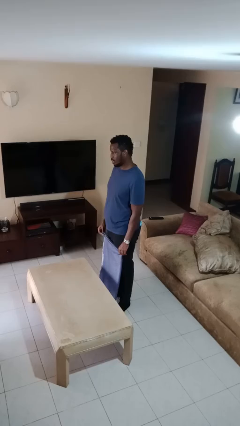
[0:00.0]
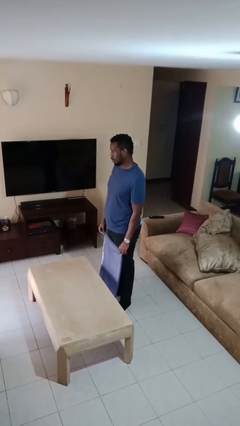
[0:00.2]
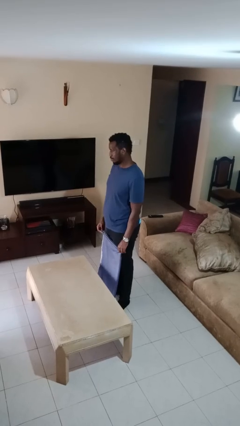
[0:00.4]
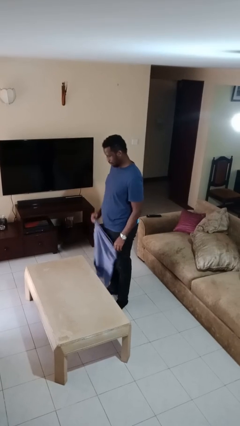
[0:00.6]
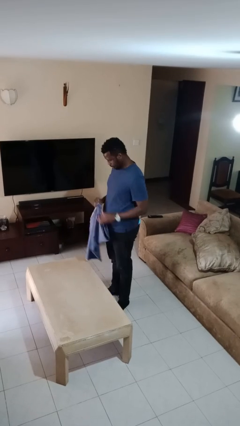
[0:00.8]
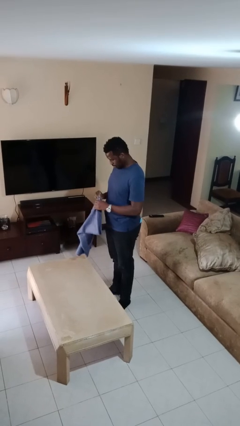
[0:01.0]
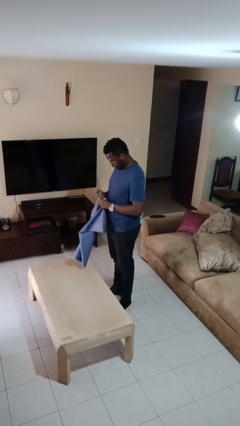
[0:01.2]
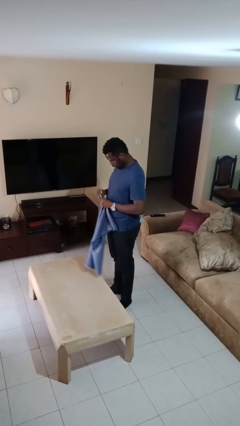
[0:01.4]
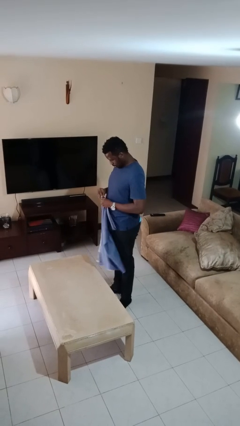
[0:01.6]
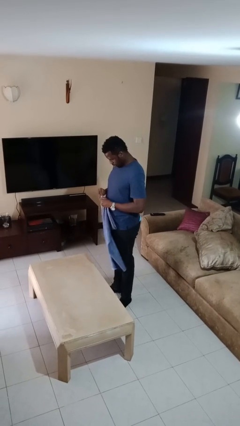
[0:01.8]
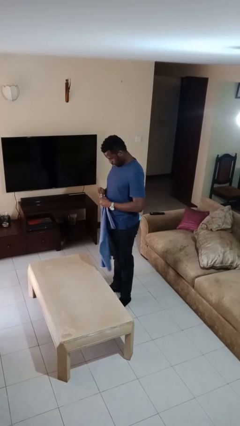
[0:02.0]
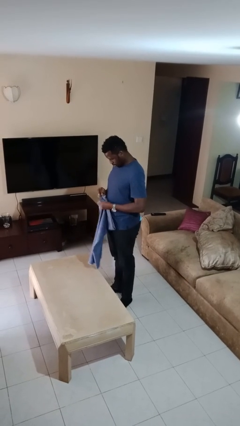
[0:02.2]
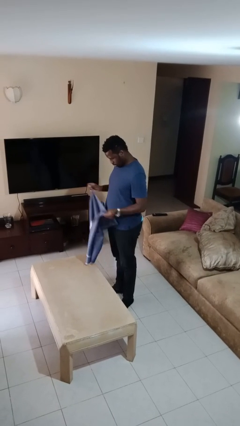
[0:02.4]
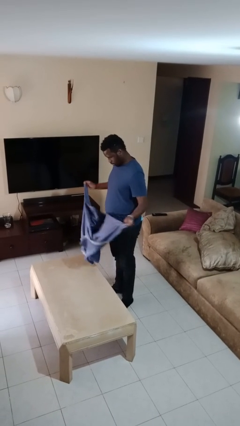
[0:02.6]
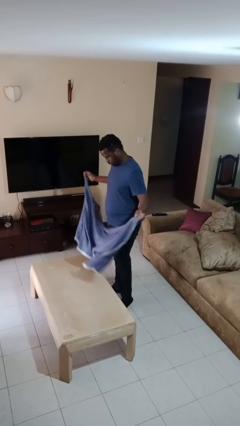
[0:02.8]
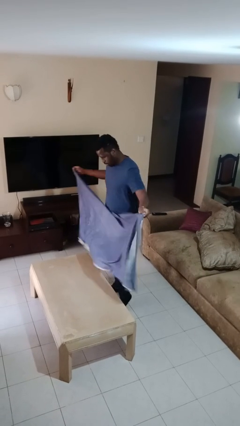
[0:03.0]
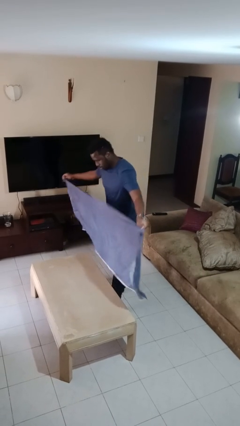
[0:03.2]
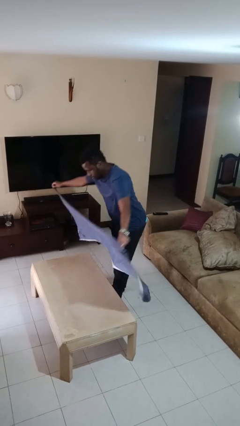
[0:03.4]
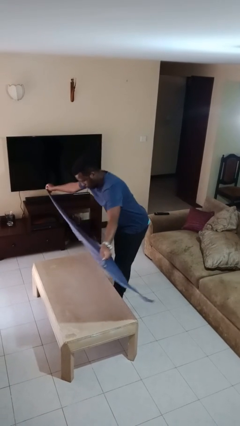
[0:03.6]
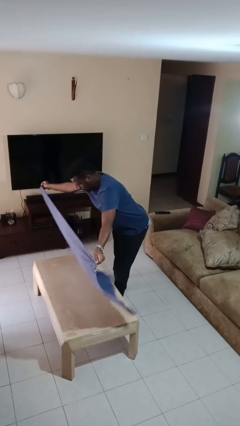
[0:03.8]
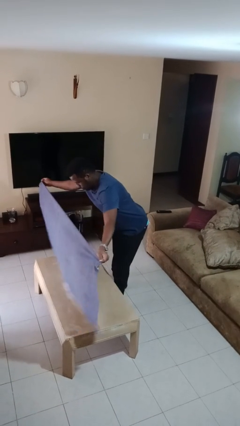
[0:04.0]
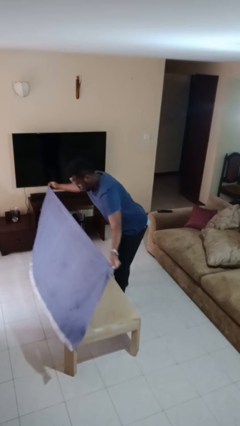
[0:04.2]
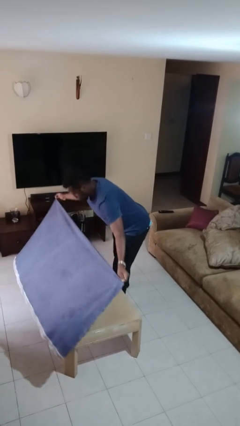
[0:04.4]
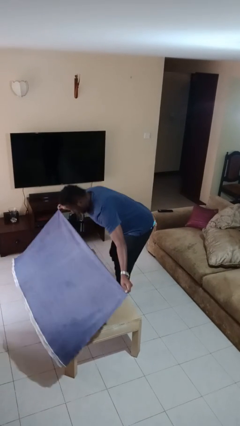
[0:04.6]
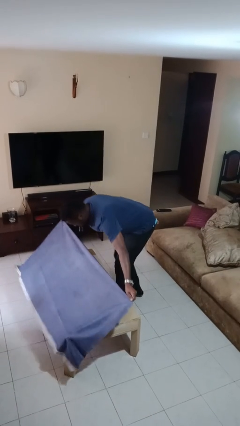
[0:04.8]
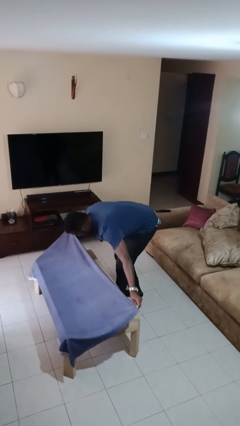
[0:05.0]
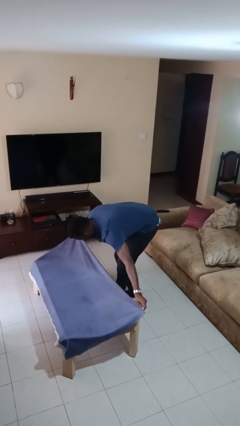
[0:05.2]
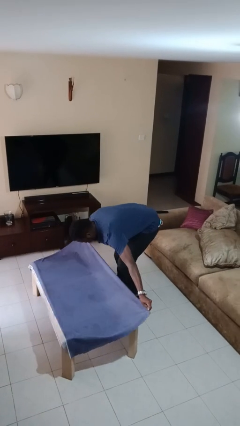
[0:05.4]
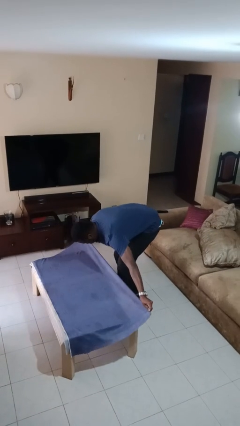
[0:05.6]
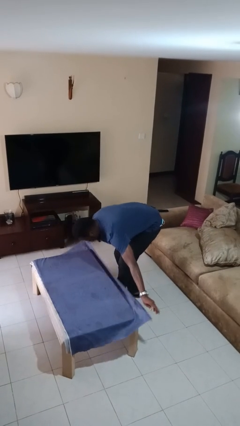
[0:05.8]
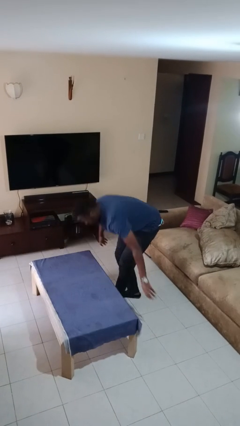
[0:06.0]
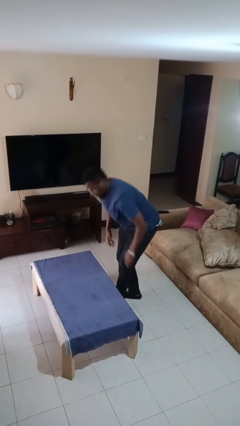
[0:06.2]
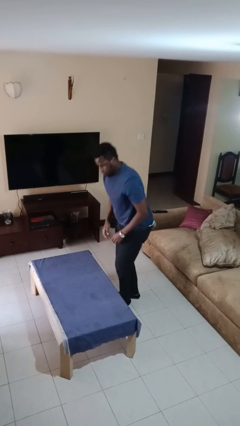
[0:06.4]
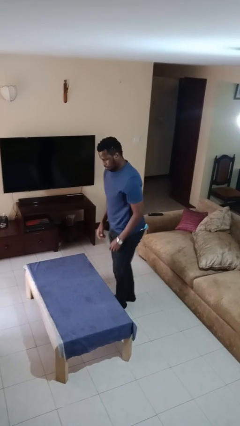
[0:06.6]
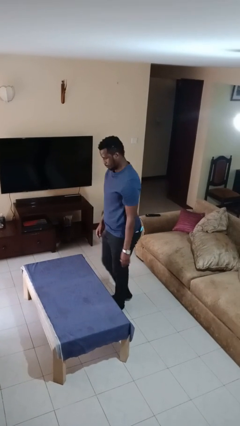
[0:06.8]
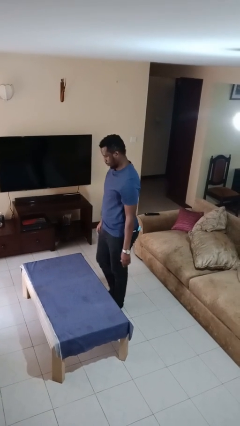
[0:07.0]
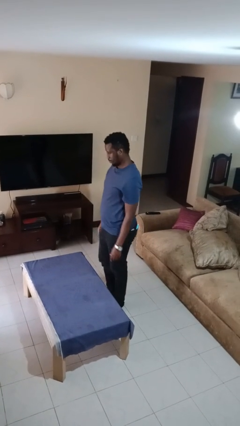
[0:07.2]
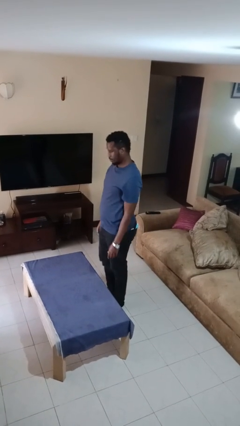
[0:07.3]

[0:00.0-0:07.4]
person spreads tablecloth

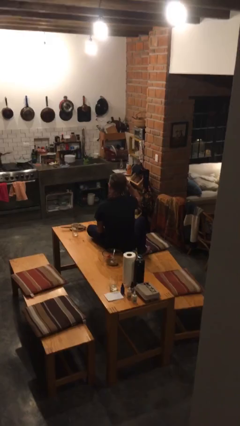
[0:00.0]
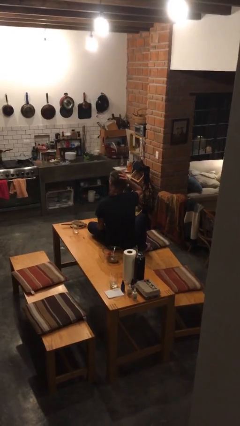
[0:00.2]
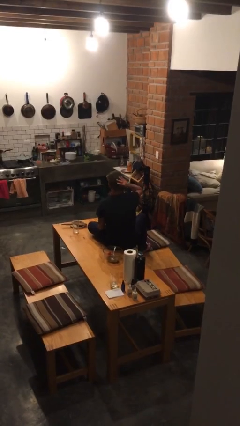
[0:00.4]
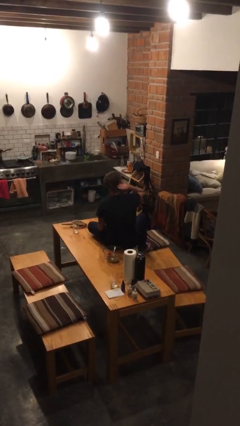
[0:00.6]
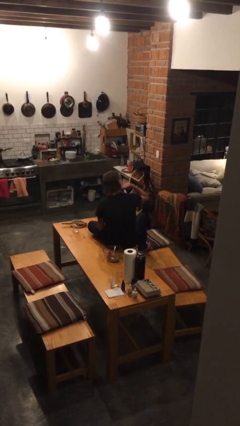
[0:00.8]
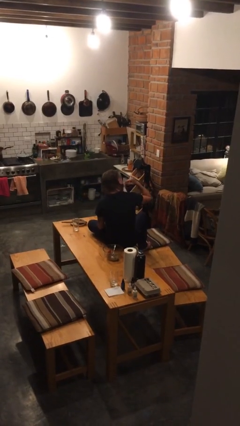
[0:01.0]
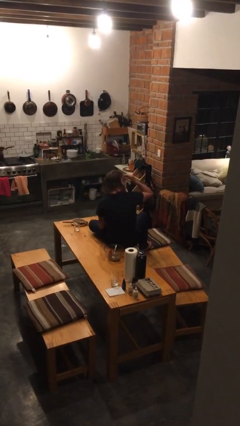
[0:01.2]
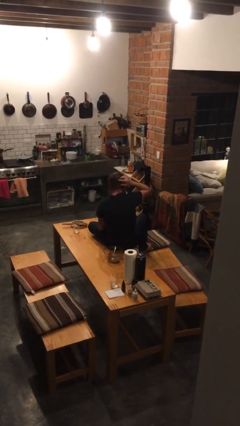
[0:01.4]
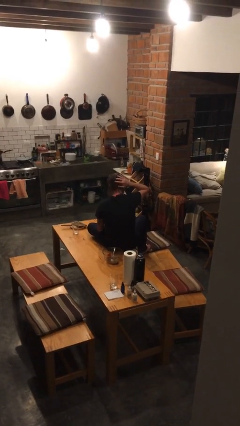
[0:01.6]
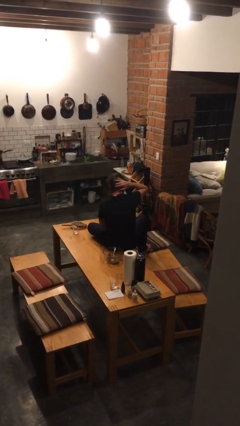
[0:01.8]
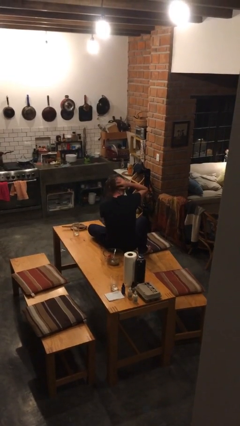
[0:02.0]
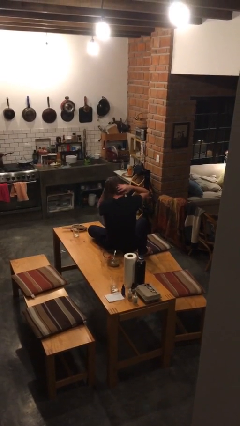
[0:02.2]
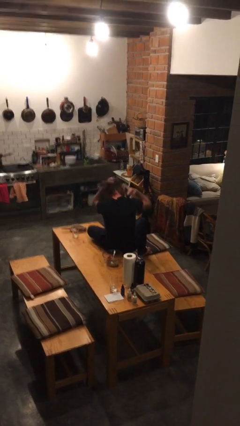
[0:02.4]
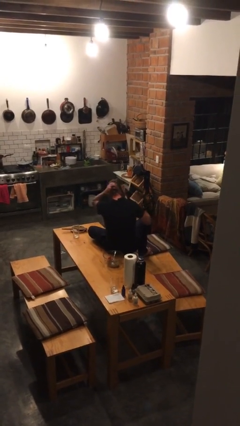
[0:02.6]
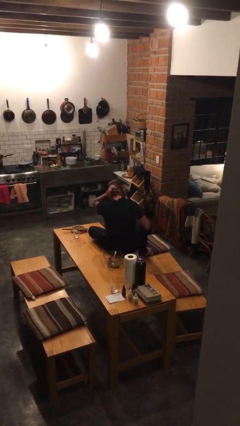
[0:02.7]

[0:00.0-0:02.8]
person strokes hair

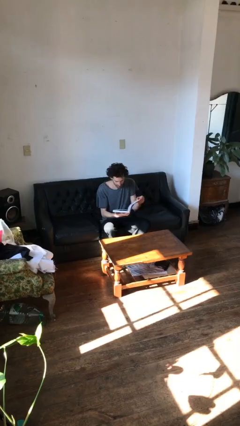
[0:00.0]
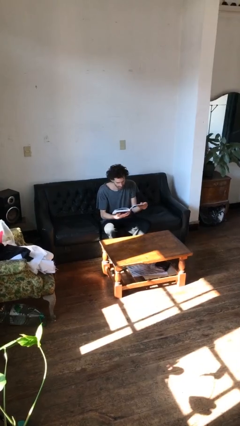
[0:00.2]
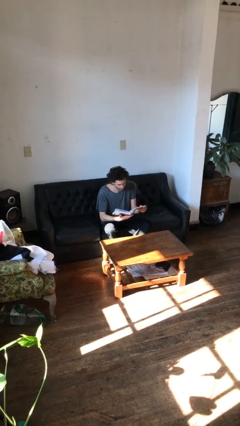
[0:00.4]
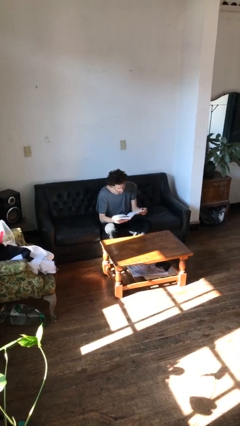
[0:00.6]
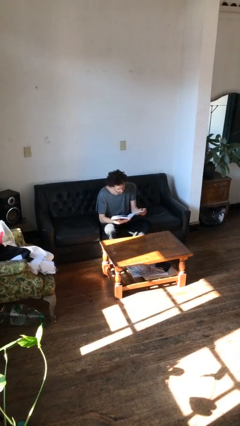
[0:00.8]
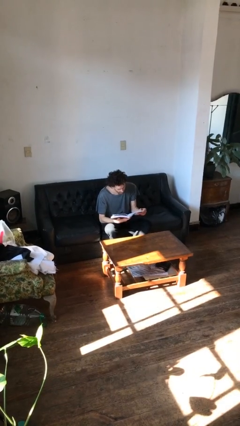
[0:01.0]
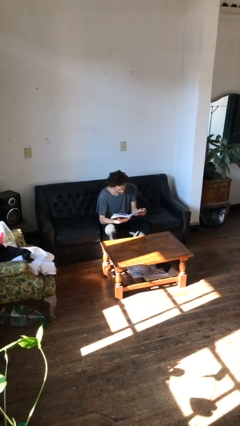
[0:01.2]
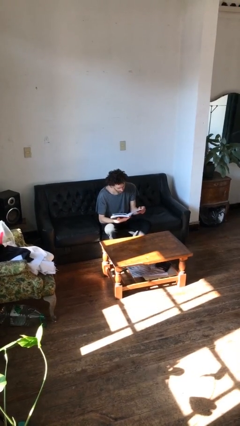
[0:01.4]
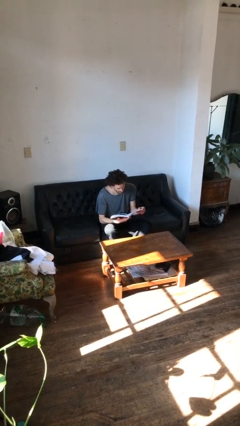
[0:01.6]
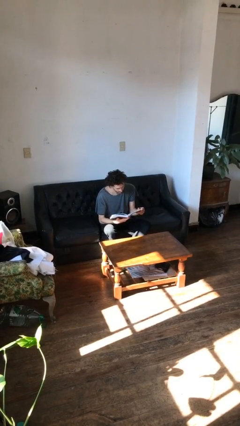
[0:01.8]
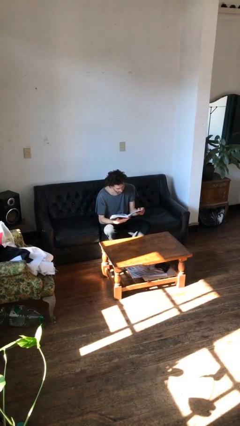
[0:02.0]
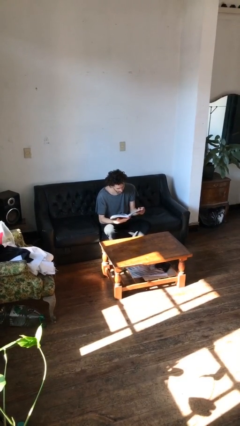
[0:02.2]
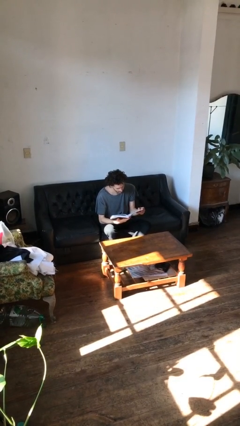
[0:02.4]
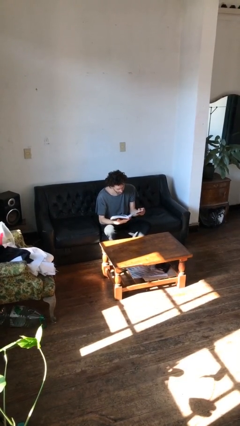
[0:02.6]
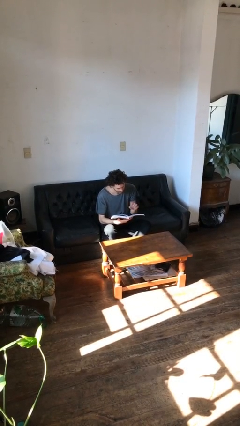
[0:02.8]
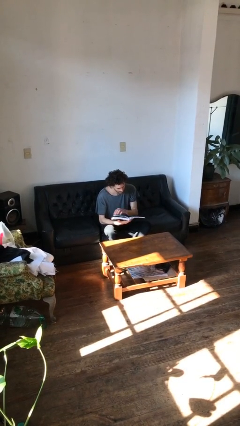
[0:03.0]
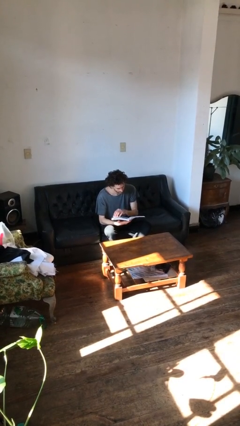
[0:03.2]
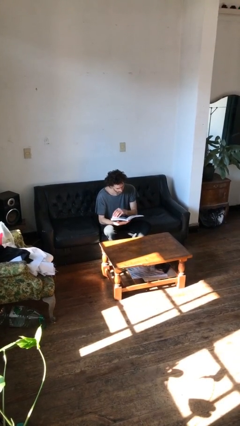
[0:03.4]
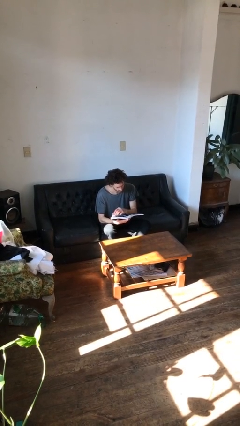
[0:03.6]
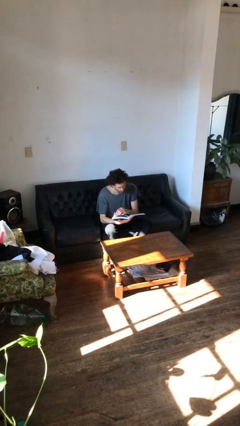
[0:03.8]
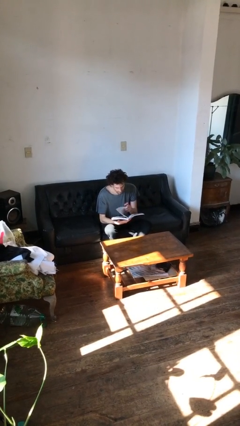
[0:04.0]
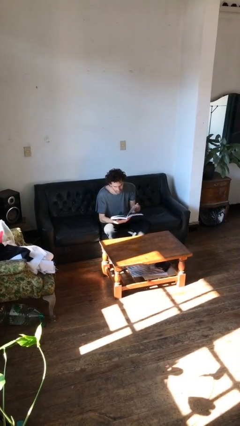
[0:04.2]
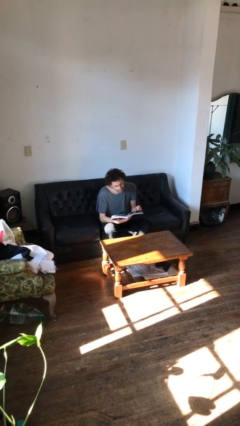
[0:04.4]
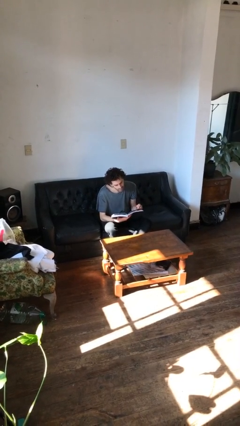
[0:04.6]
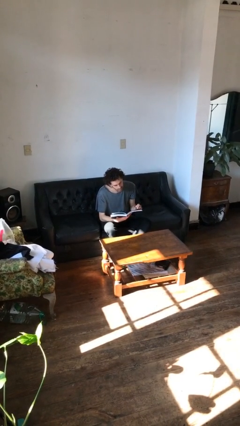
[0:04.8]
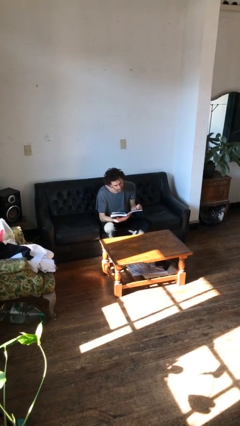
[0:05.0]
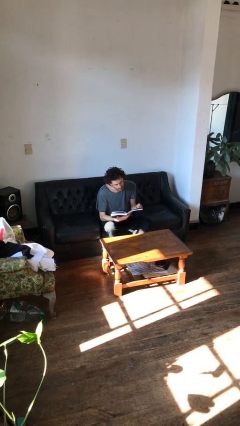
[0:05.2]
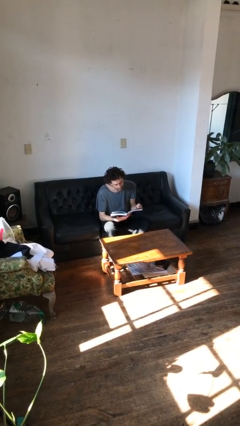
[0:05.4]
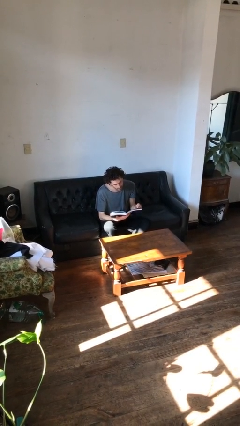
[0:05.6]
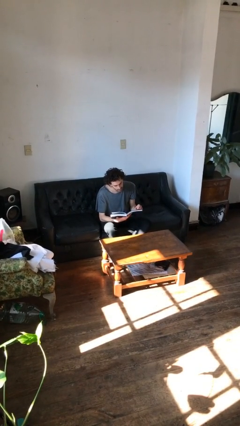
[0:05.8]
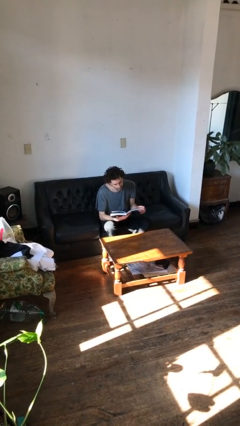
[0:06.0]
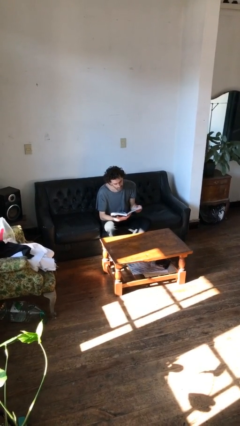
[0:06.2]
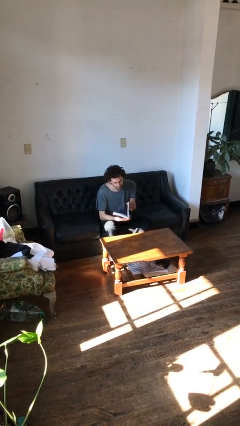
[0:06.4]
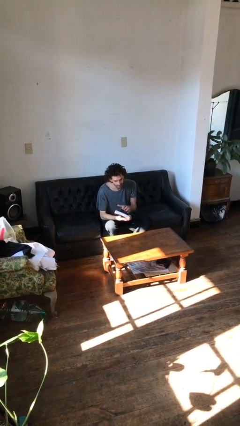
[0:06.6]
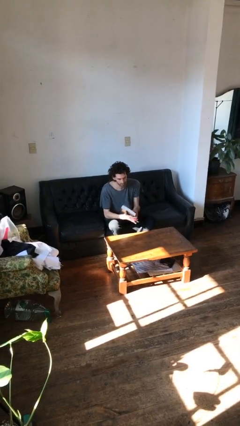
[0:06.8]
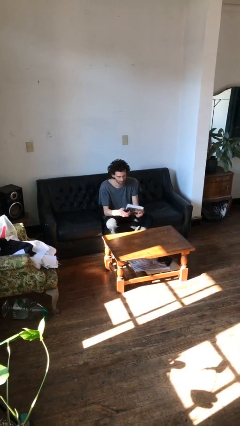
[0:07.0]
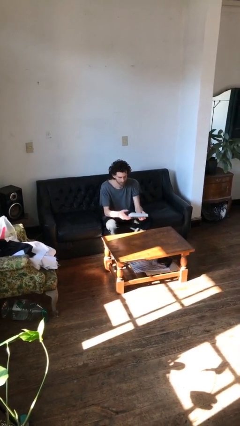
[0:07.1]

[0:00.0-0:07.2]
person reads document
